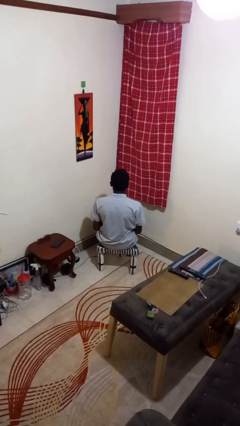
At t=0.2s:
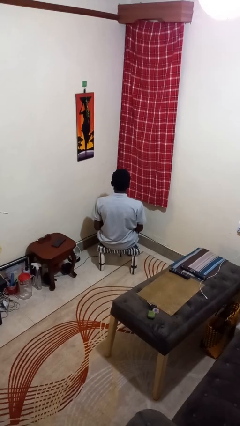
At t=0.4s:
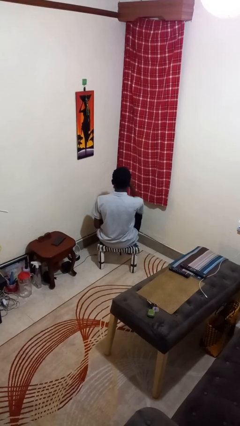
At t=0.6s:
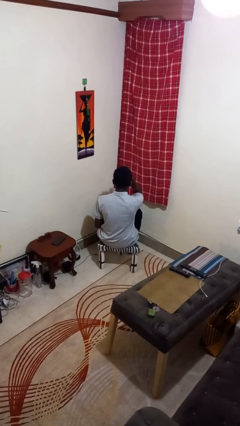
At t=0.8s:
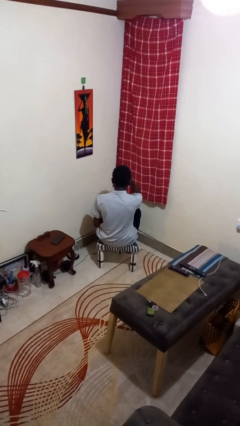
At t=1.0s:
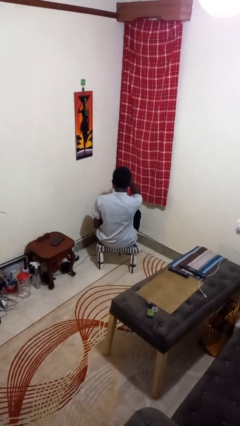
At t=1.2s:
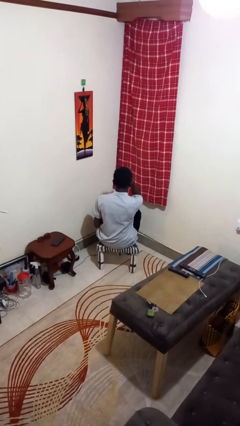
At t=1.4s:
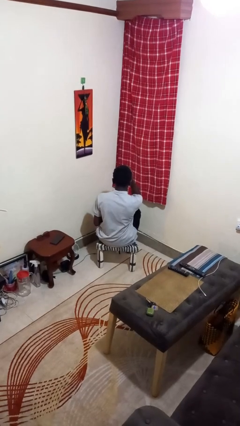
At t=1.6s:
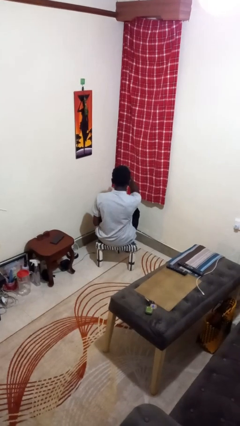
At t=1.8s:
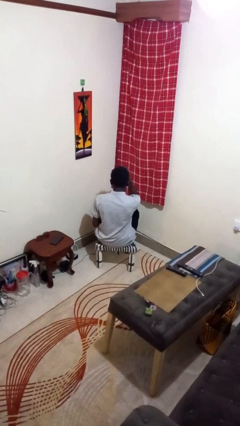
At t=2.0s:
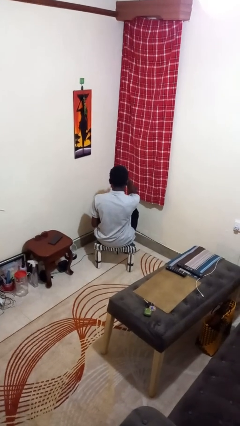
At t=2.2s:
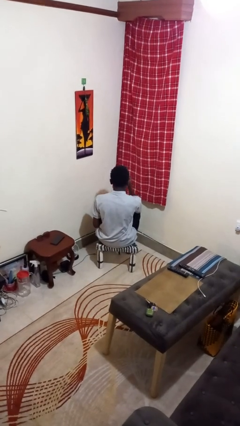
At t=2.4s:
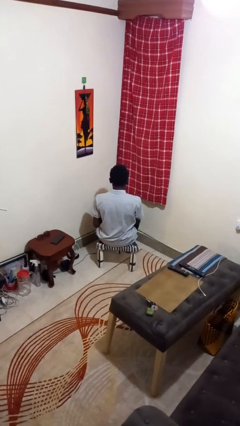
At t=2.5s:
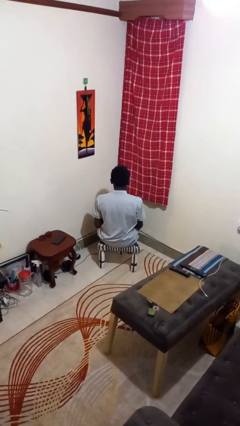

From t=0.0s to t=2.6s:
person scratches face

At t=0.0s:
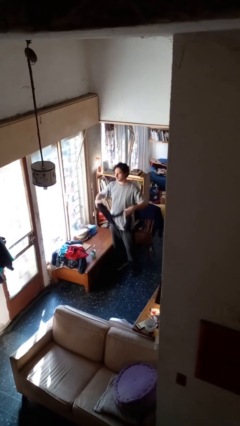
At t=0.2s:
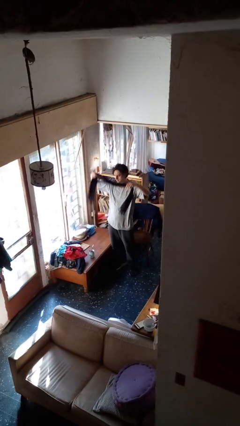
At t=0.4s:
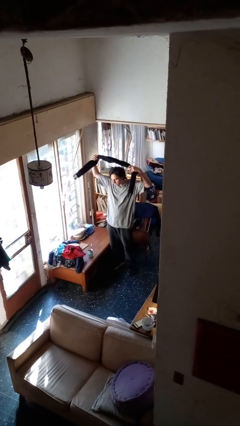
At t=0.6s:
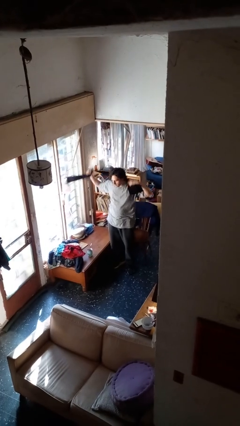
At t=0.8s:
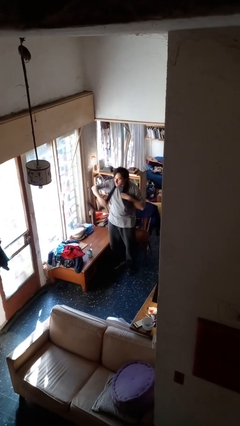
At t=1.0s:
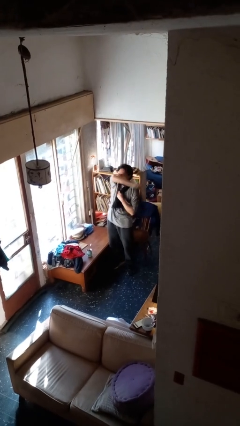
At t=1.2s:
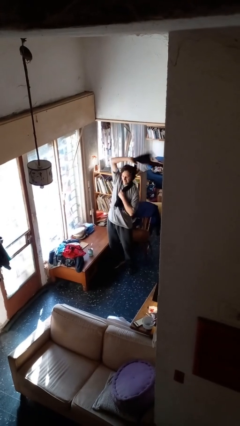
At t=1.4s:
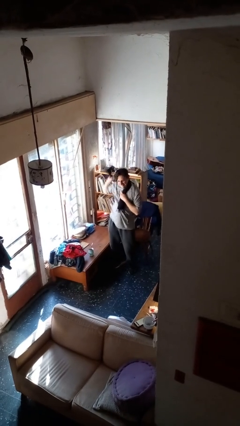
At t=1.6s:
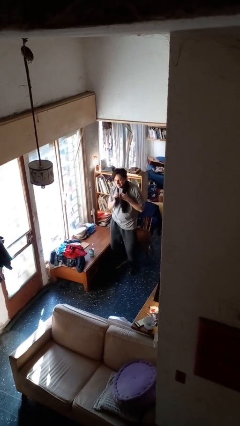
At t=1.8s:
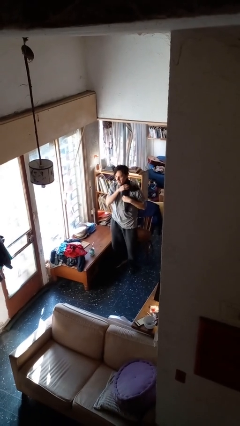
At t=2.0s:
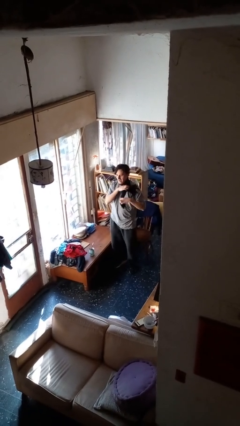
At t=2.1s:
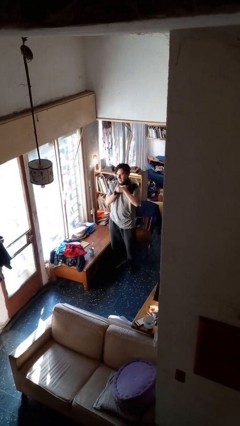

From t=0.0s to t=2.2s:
person puts on scarf

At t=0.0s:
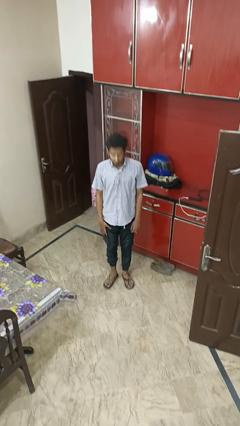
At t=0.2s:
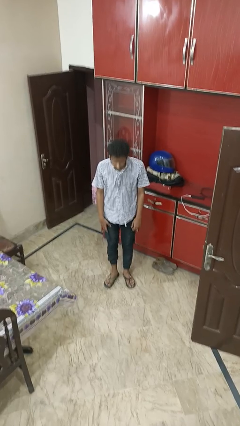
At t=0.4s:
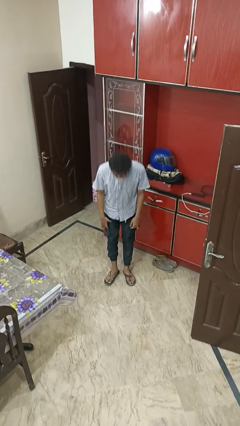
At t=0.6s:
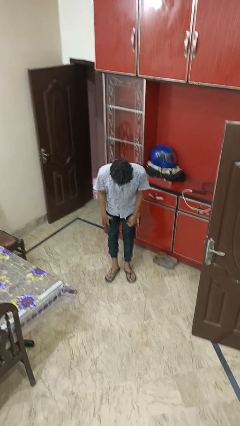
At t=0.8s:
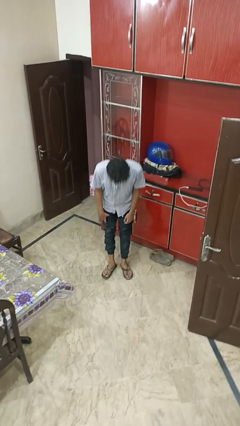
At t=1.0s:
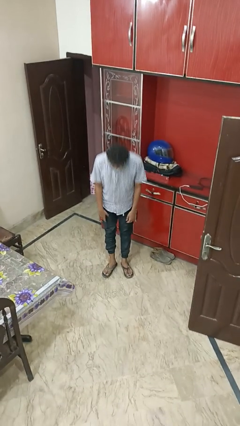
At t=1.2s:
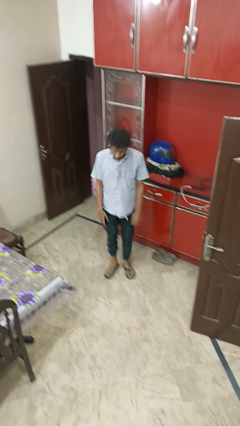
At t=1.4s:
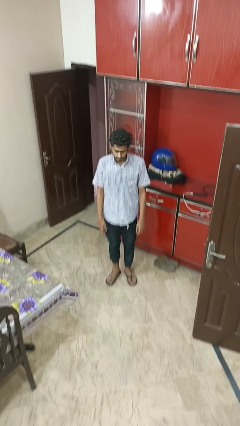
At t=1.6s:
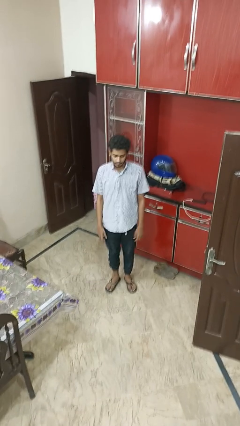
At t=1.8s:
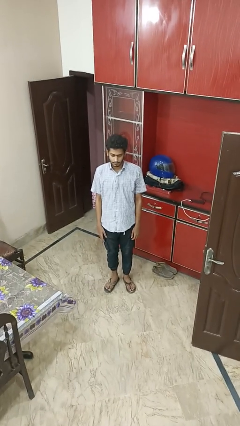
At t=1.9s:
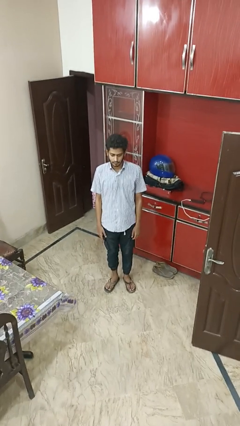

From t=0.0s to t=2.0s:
person bows

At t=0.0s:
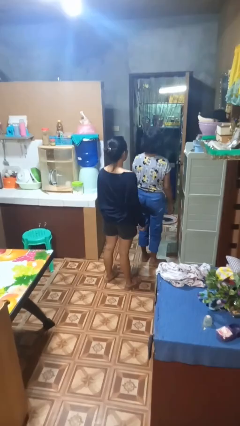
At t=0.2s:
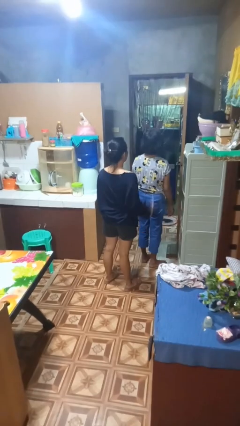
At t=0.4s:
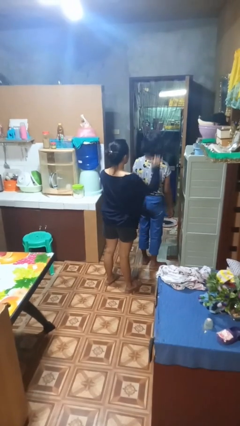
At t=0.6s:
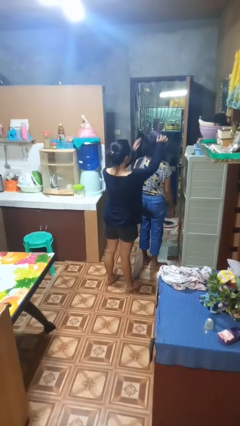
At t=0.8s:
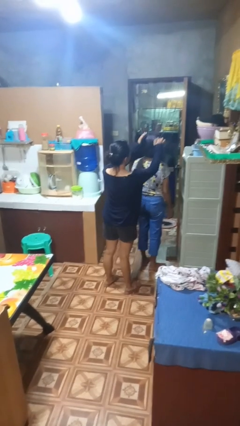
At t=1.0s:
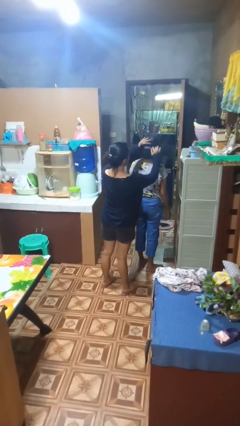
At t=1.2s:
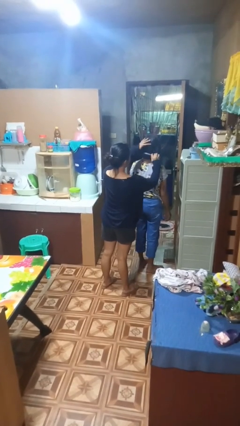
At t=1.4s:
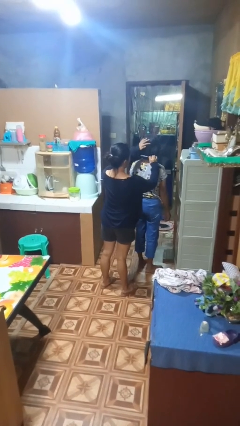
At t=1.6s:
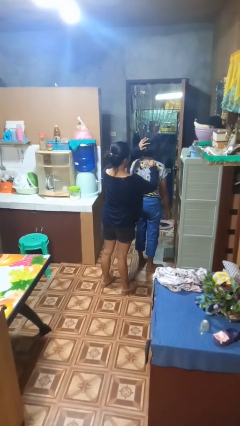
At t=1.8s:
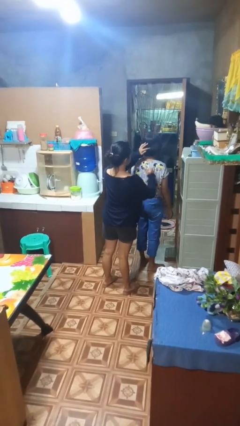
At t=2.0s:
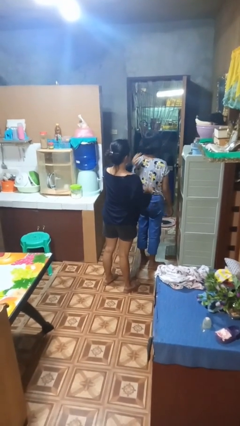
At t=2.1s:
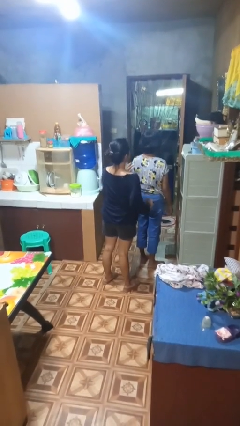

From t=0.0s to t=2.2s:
person brushes hair of person

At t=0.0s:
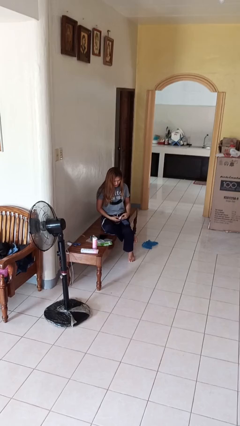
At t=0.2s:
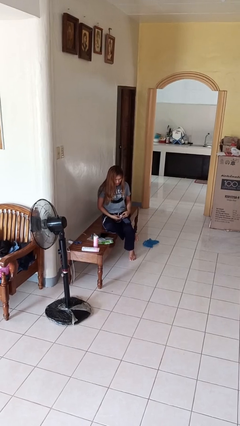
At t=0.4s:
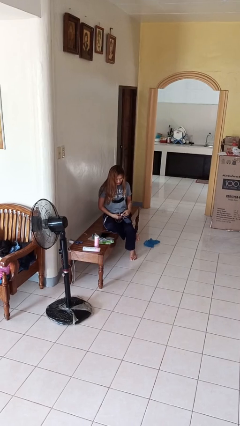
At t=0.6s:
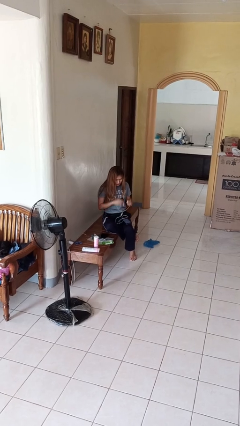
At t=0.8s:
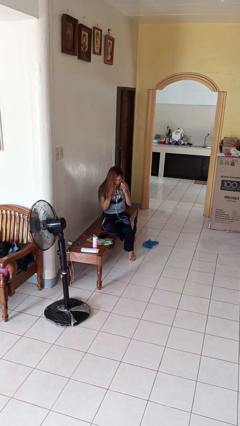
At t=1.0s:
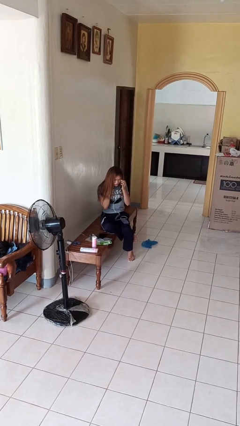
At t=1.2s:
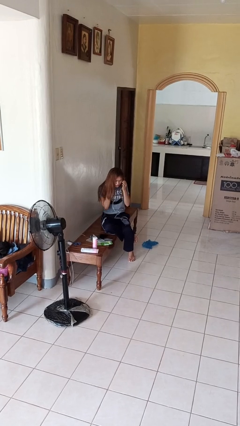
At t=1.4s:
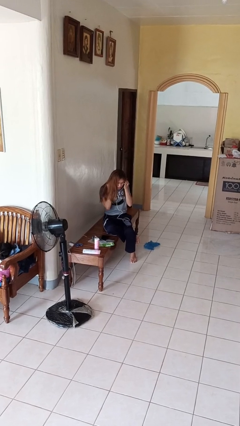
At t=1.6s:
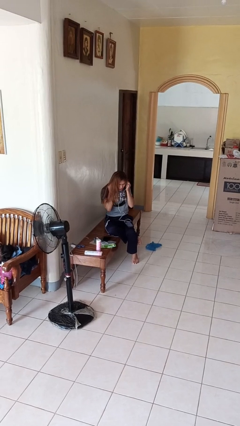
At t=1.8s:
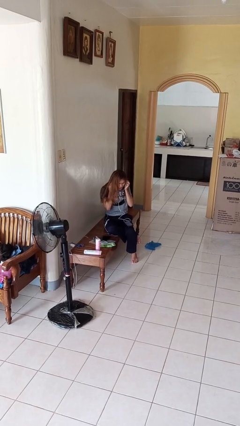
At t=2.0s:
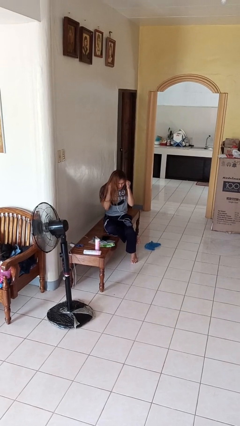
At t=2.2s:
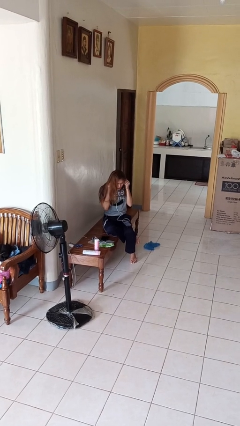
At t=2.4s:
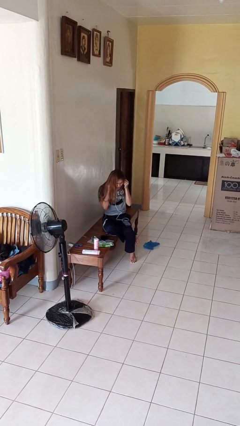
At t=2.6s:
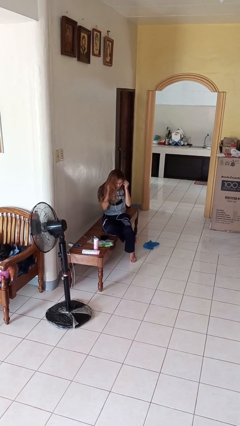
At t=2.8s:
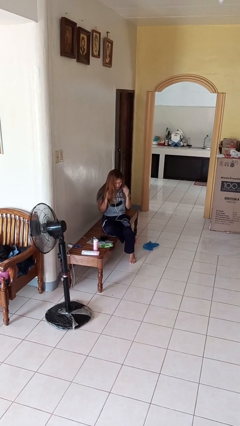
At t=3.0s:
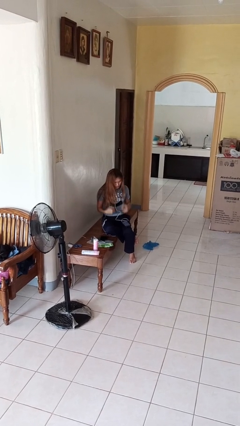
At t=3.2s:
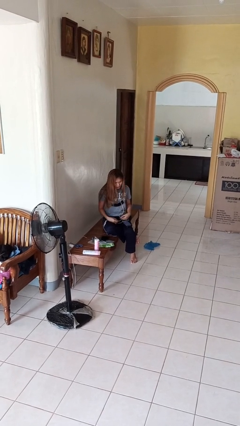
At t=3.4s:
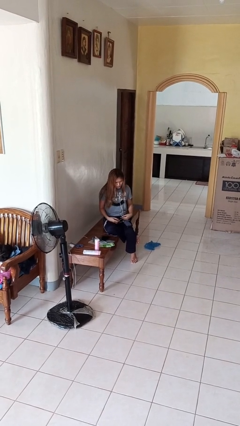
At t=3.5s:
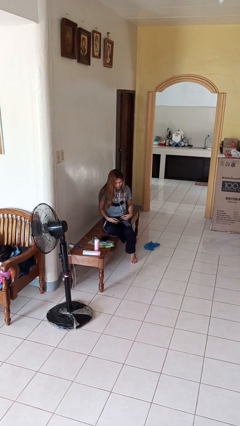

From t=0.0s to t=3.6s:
person puts on headphones

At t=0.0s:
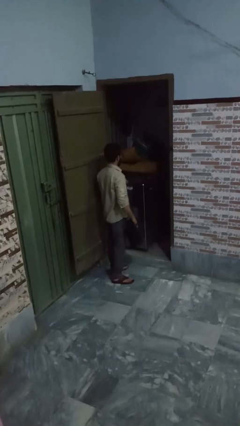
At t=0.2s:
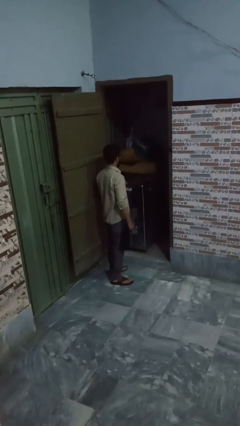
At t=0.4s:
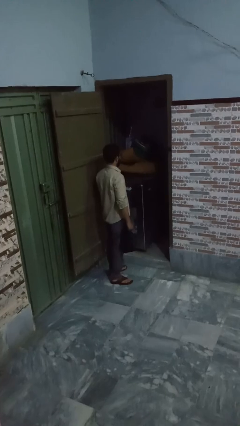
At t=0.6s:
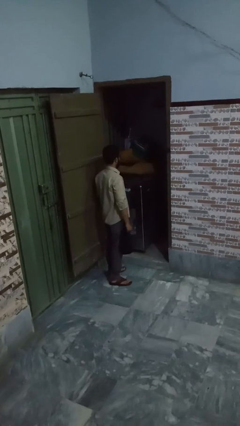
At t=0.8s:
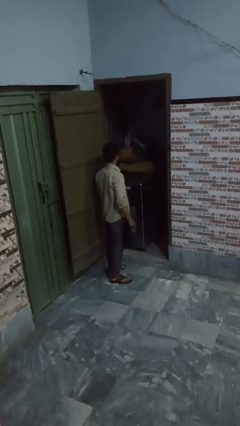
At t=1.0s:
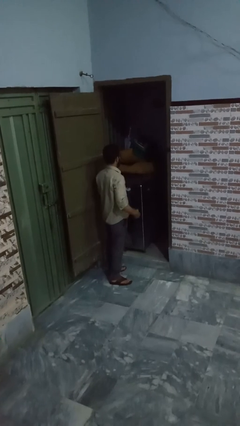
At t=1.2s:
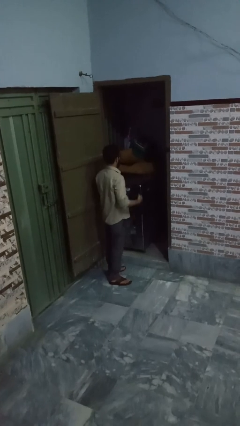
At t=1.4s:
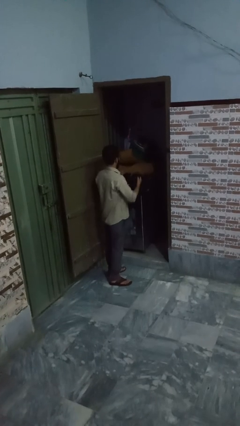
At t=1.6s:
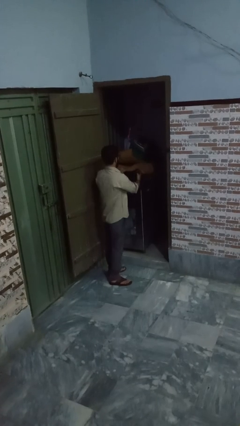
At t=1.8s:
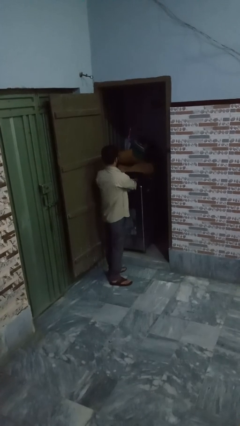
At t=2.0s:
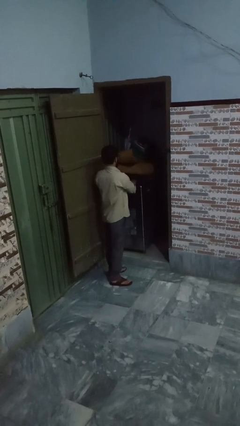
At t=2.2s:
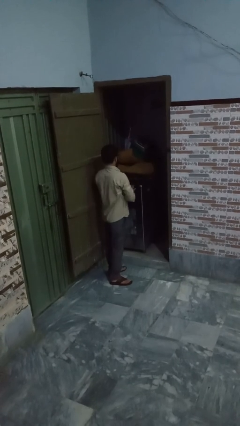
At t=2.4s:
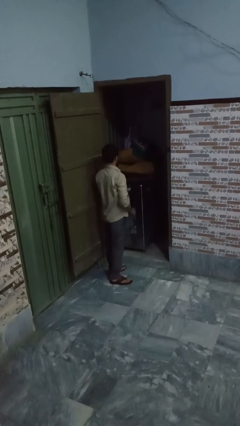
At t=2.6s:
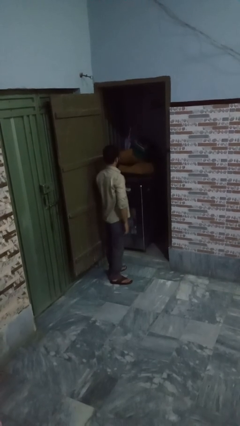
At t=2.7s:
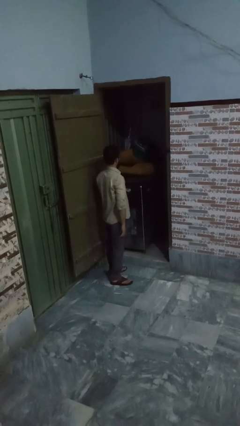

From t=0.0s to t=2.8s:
person loads dryer

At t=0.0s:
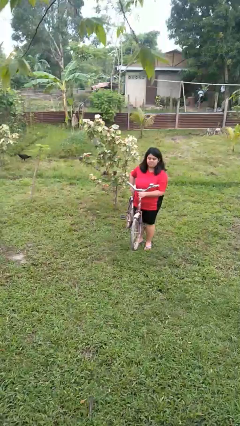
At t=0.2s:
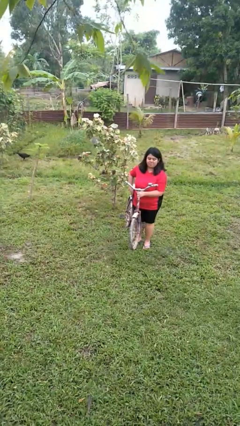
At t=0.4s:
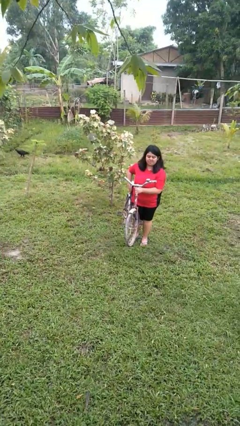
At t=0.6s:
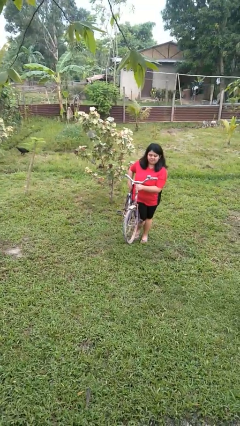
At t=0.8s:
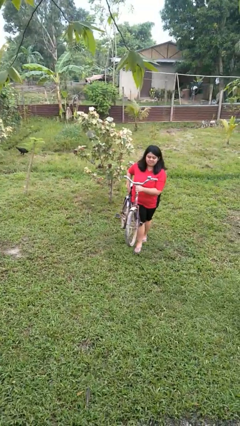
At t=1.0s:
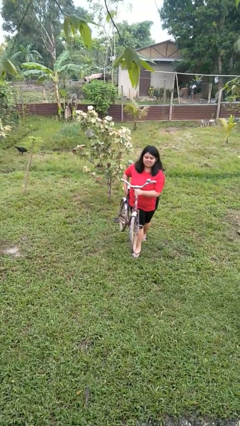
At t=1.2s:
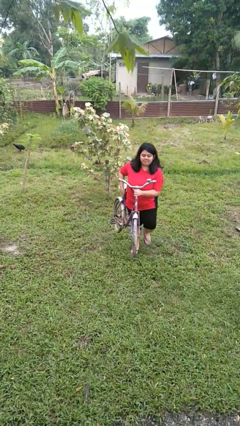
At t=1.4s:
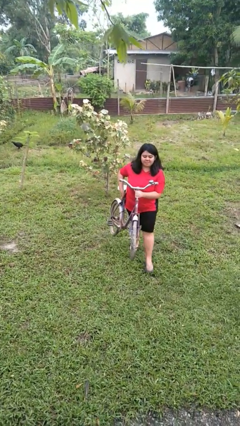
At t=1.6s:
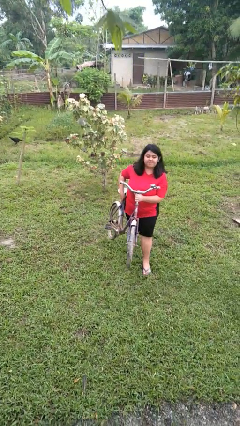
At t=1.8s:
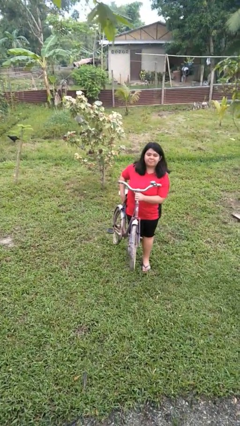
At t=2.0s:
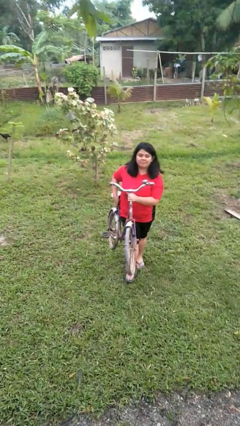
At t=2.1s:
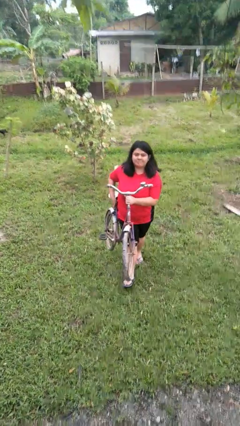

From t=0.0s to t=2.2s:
person carries bicycle
